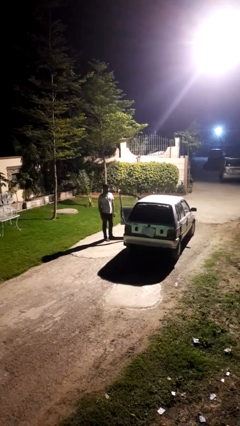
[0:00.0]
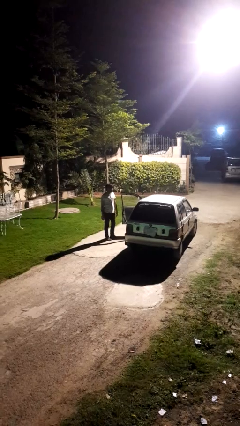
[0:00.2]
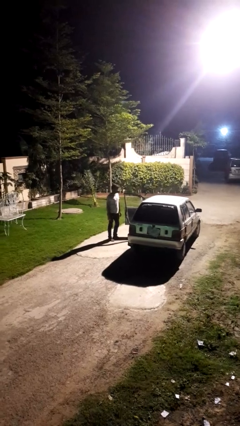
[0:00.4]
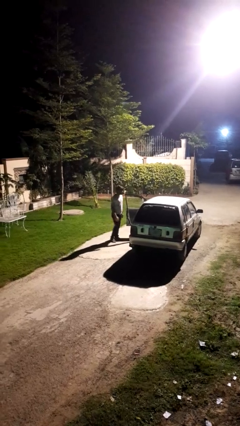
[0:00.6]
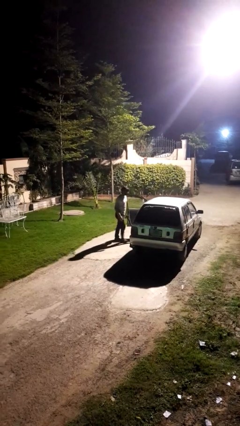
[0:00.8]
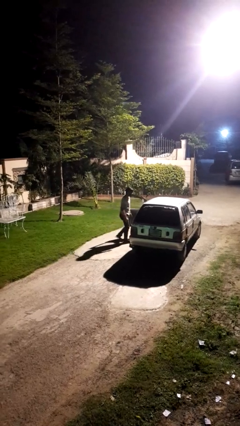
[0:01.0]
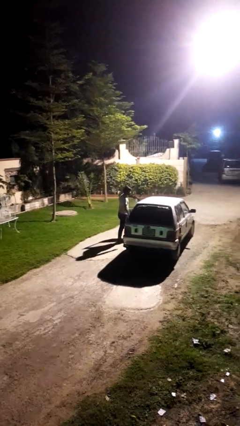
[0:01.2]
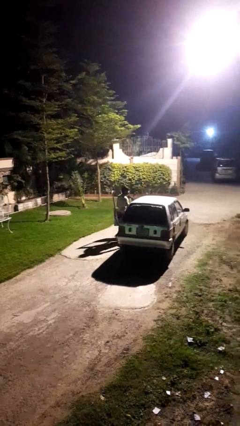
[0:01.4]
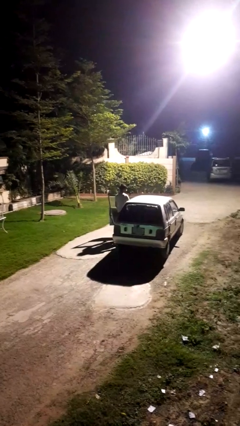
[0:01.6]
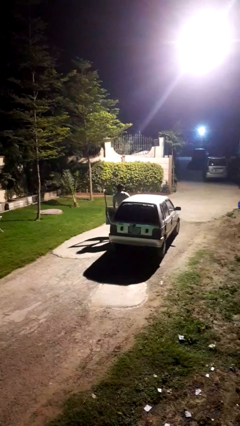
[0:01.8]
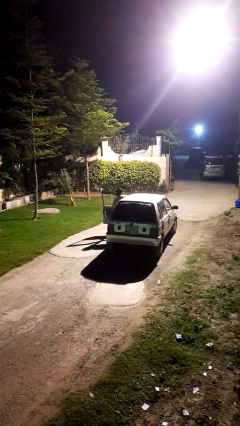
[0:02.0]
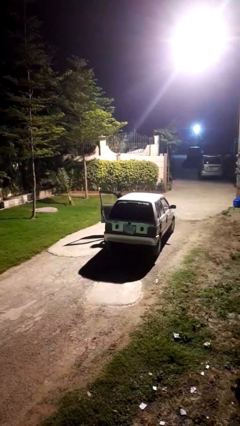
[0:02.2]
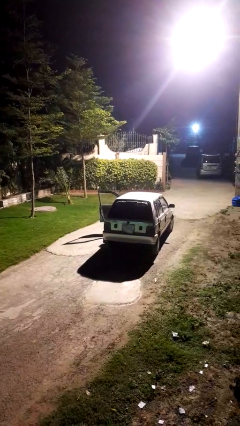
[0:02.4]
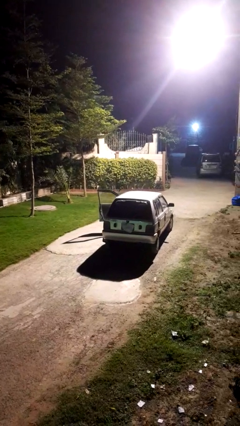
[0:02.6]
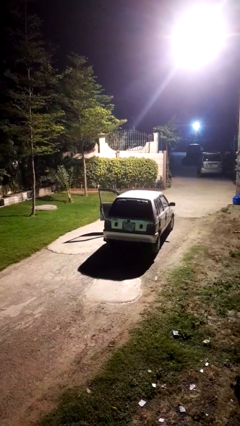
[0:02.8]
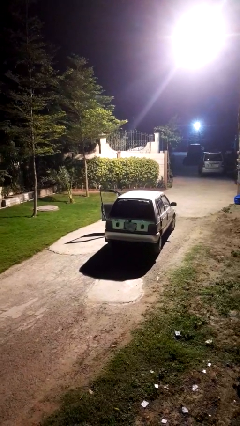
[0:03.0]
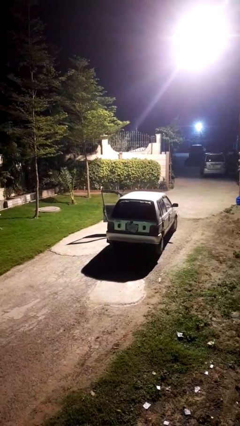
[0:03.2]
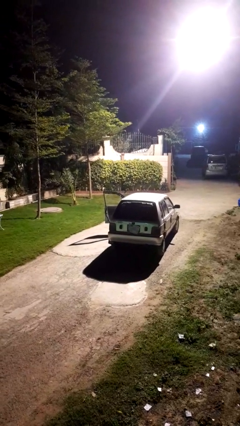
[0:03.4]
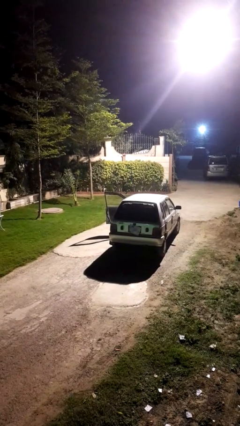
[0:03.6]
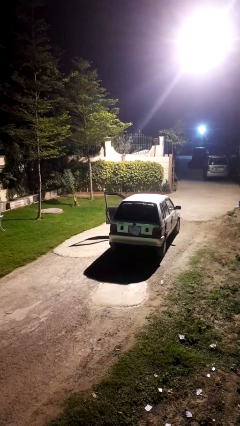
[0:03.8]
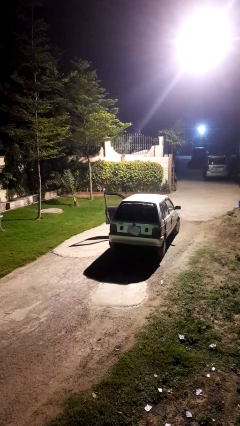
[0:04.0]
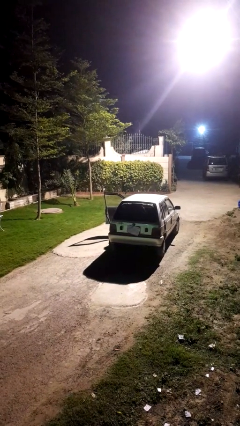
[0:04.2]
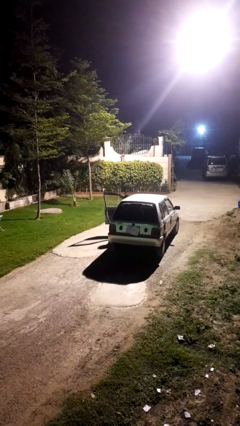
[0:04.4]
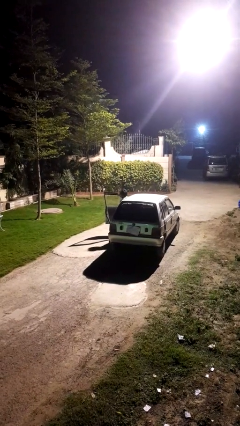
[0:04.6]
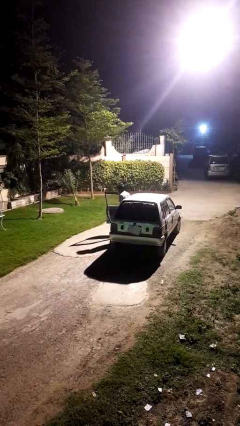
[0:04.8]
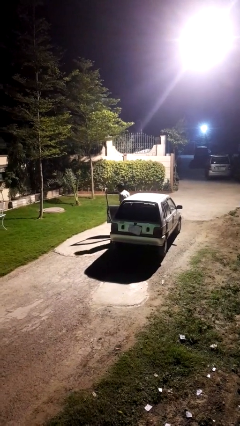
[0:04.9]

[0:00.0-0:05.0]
person enters car

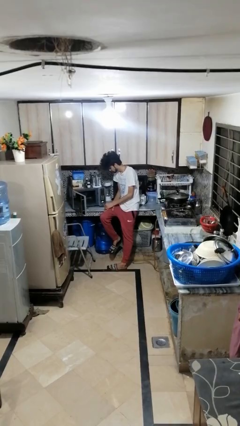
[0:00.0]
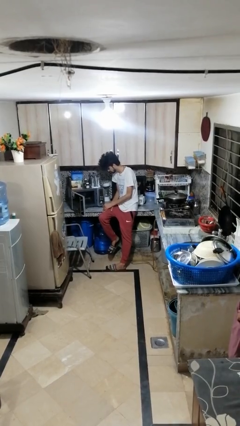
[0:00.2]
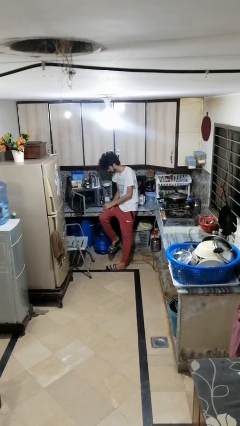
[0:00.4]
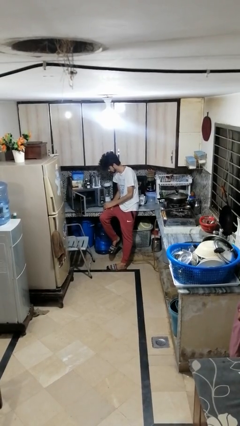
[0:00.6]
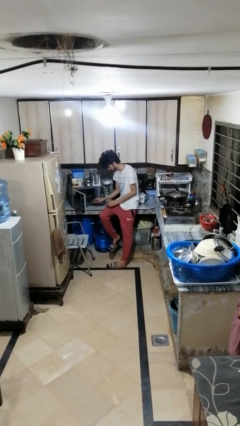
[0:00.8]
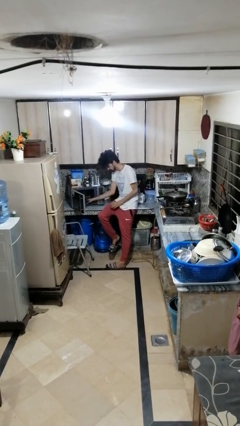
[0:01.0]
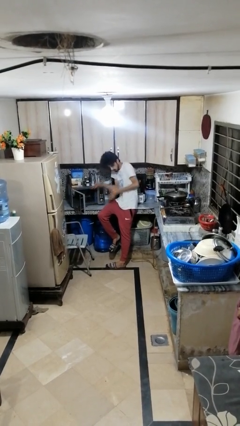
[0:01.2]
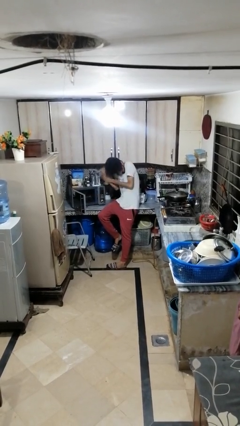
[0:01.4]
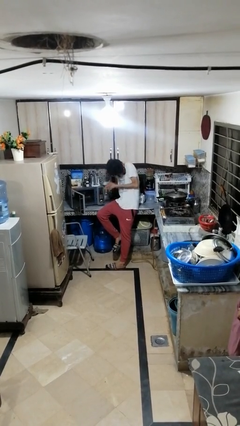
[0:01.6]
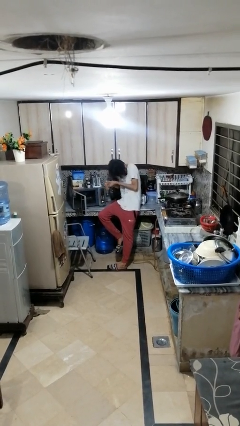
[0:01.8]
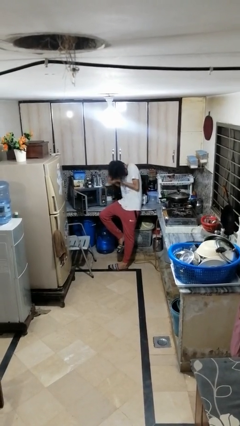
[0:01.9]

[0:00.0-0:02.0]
person burns hand

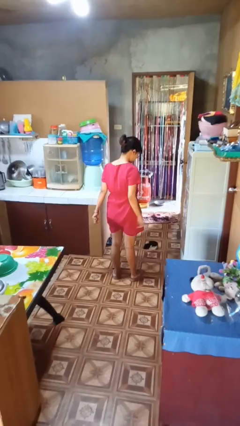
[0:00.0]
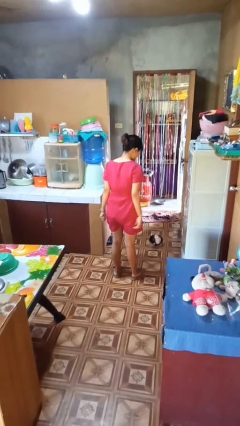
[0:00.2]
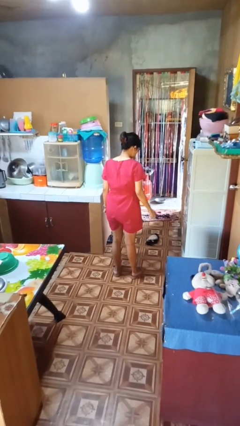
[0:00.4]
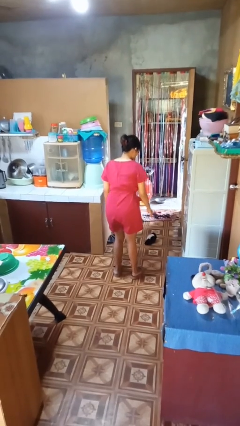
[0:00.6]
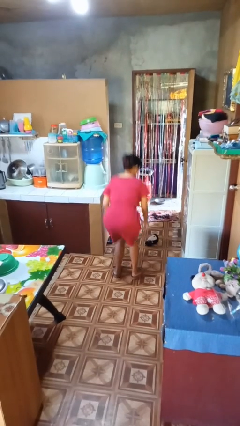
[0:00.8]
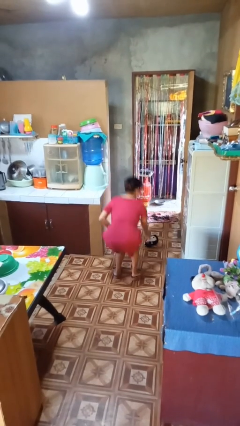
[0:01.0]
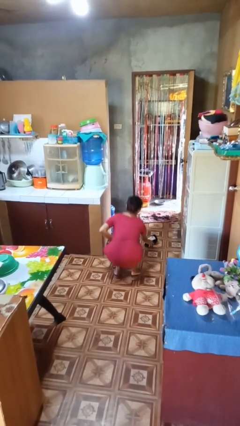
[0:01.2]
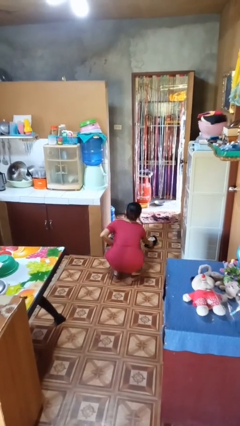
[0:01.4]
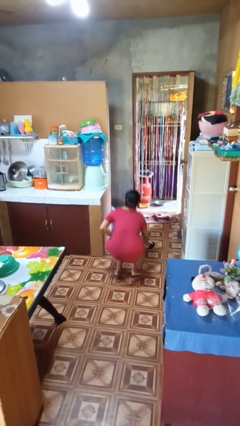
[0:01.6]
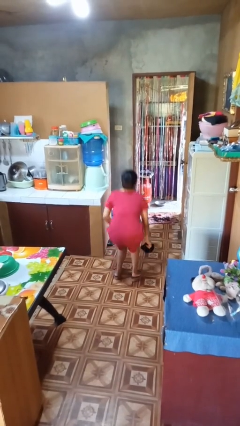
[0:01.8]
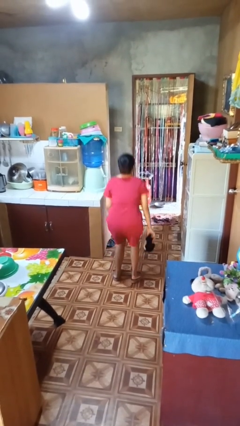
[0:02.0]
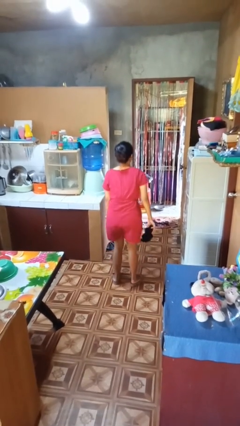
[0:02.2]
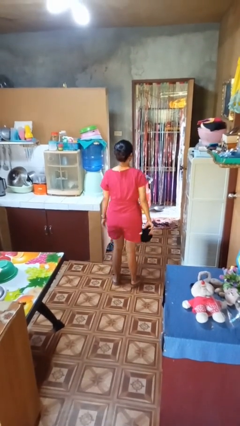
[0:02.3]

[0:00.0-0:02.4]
person picks up object from floor

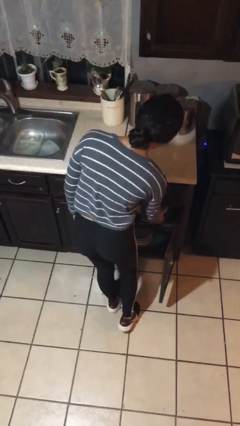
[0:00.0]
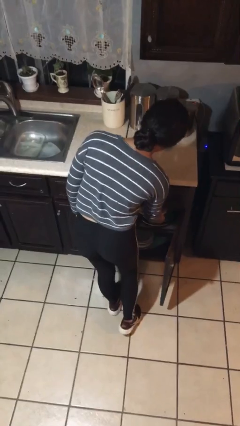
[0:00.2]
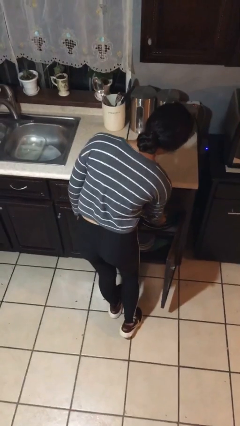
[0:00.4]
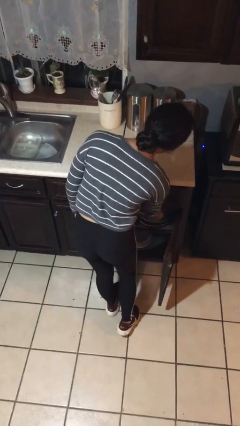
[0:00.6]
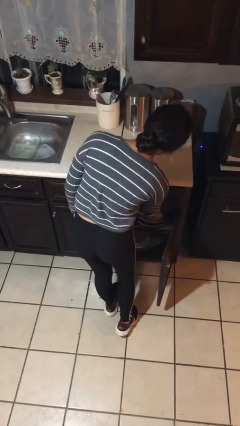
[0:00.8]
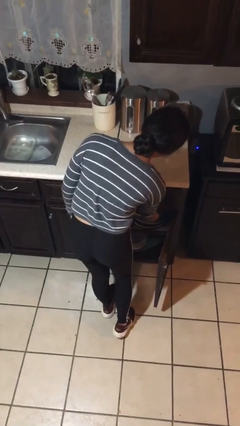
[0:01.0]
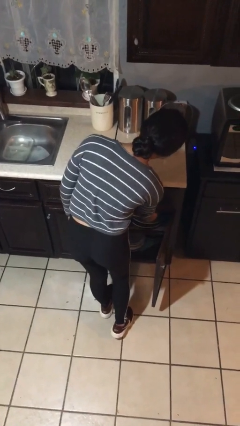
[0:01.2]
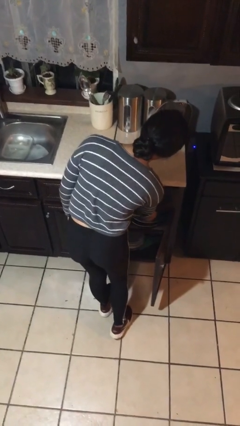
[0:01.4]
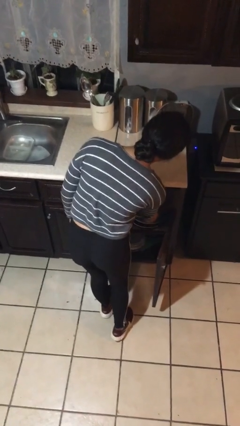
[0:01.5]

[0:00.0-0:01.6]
person takes object from cabinet

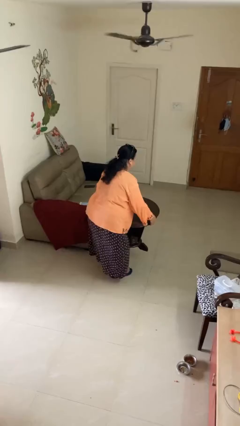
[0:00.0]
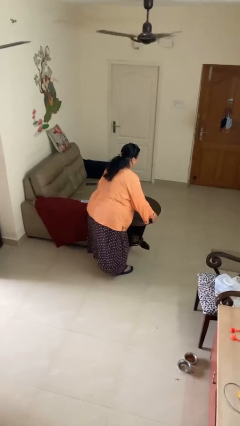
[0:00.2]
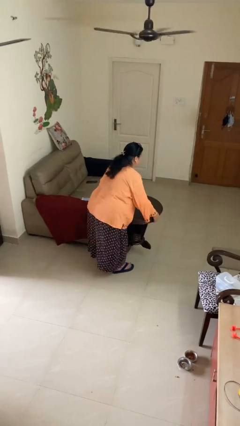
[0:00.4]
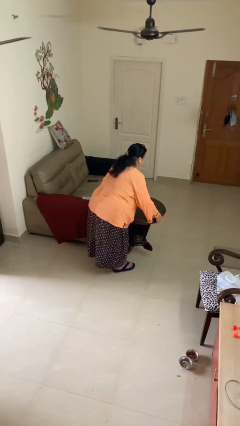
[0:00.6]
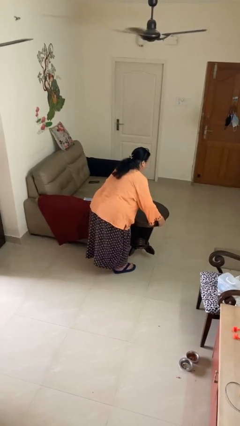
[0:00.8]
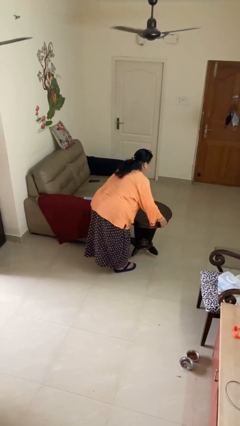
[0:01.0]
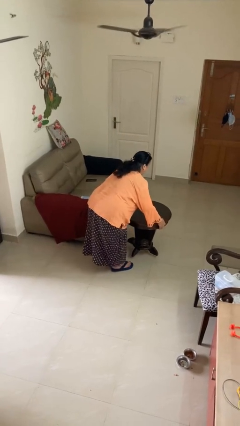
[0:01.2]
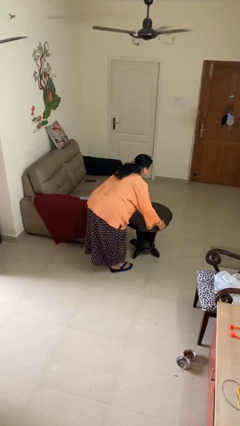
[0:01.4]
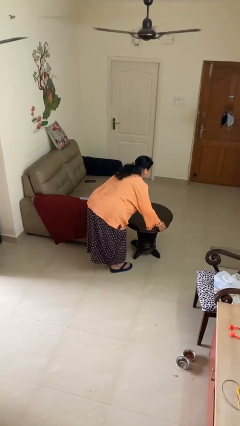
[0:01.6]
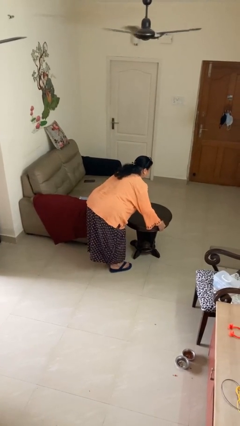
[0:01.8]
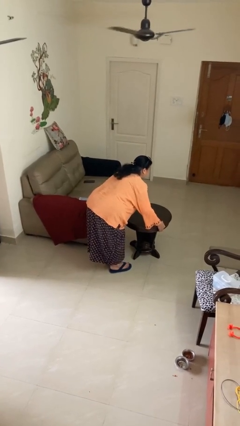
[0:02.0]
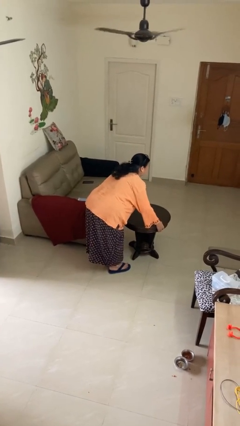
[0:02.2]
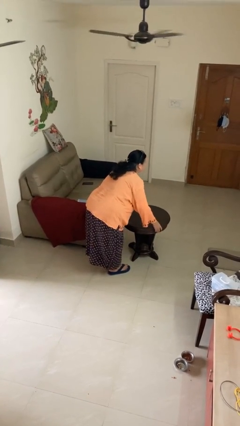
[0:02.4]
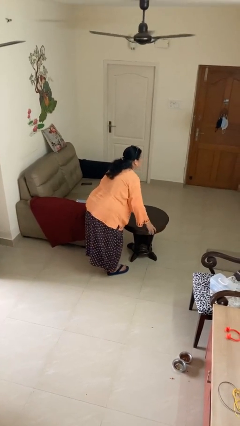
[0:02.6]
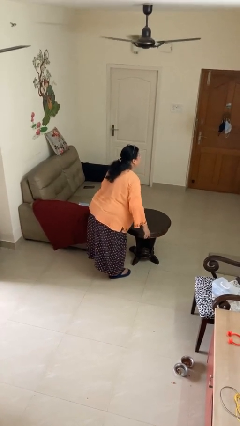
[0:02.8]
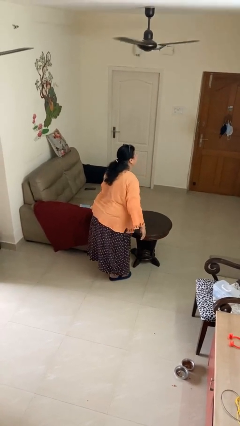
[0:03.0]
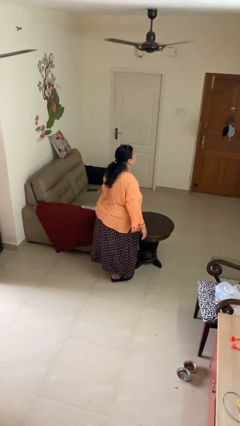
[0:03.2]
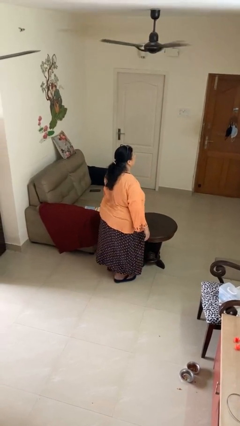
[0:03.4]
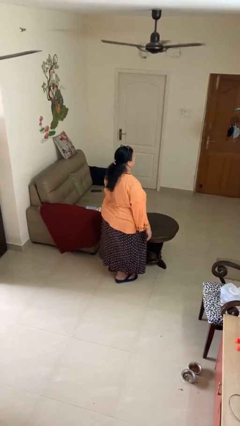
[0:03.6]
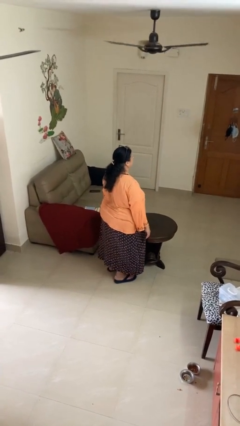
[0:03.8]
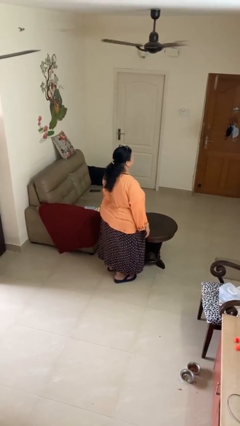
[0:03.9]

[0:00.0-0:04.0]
person puts down object on floor

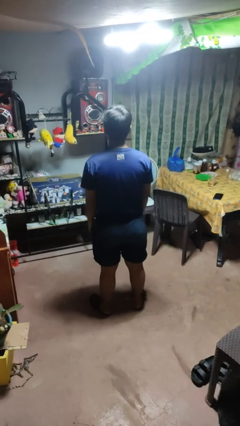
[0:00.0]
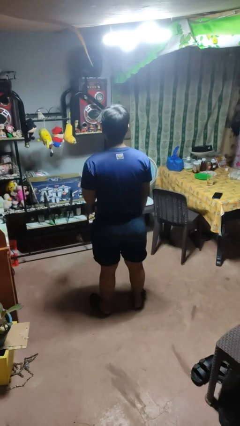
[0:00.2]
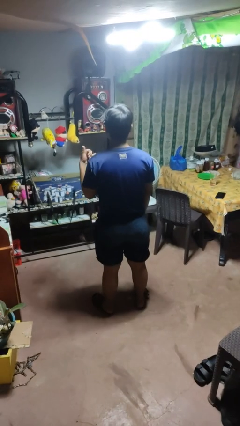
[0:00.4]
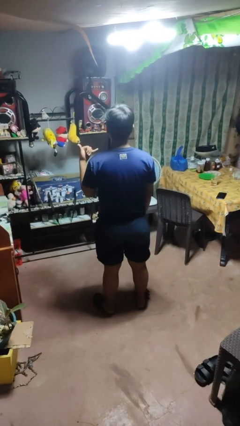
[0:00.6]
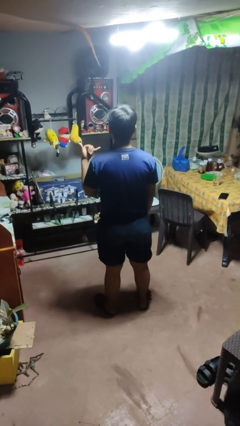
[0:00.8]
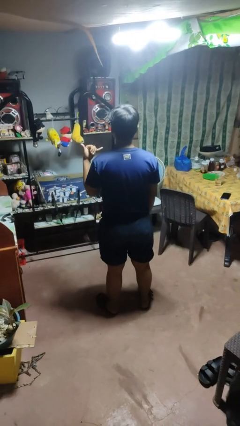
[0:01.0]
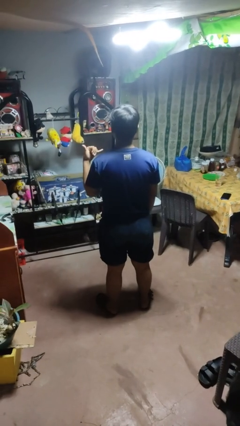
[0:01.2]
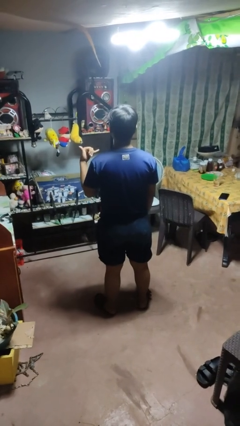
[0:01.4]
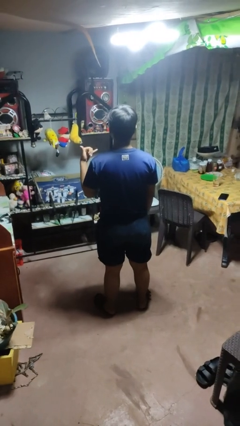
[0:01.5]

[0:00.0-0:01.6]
person gestures hang loose

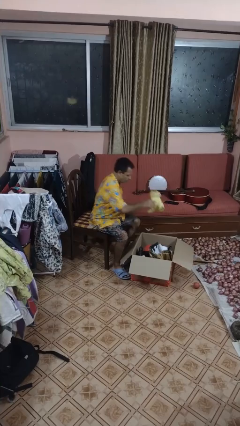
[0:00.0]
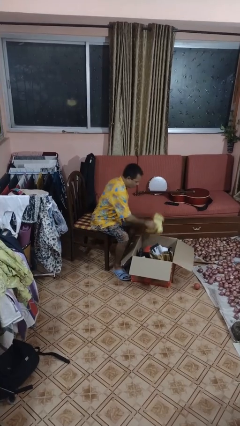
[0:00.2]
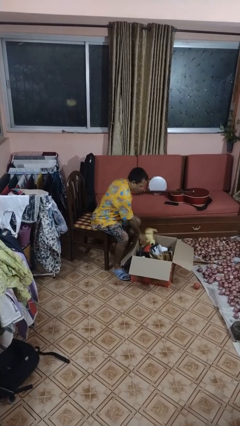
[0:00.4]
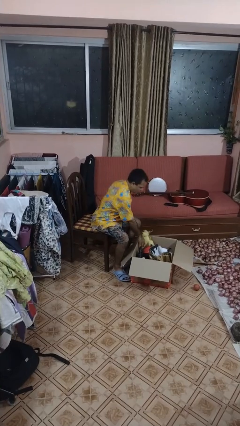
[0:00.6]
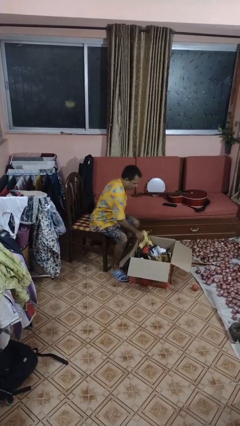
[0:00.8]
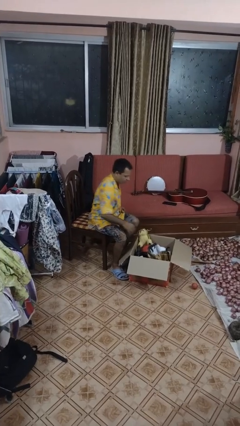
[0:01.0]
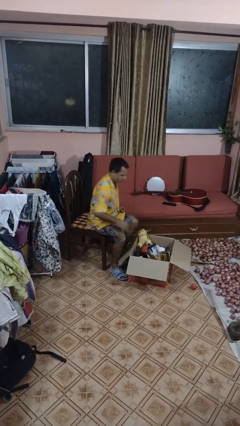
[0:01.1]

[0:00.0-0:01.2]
person puts object into box
